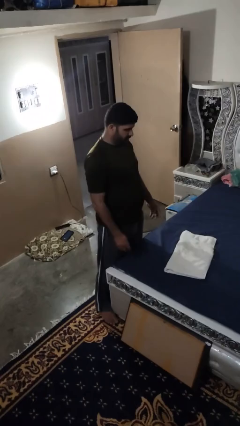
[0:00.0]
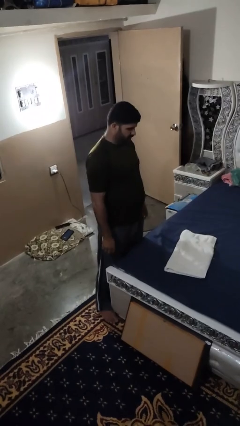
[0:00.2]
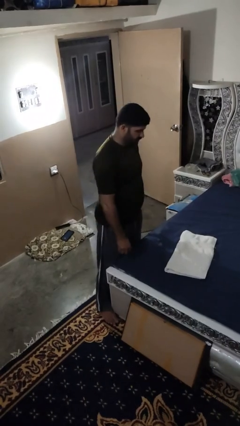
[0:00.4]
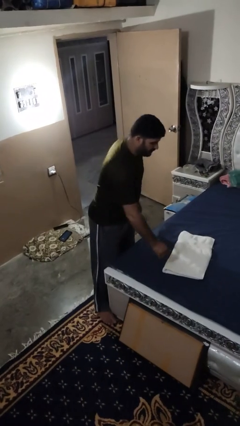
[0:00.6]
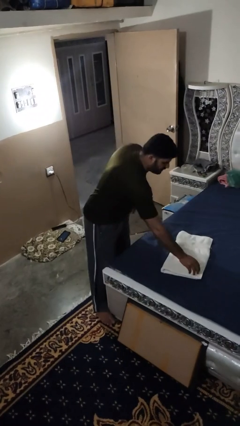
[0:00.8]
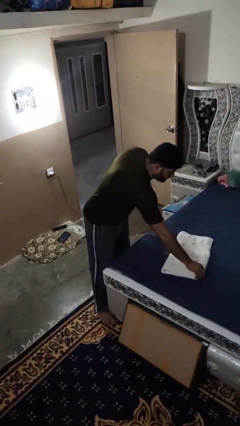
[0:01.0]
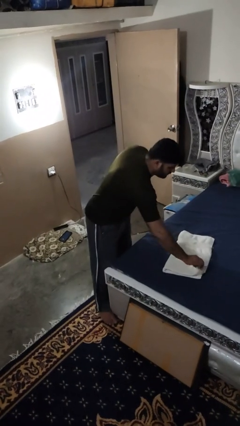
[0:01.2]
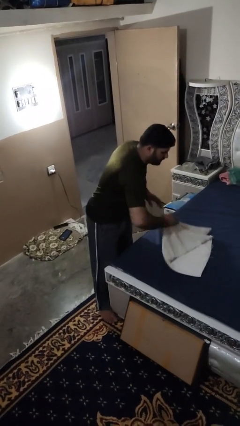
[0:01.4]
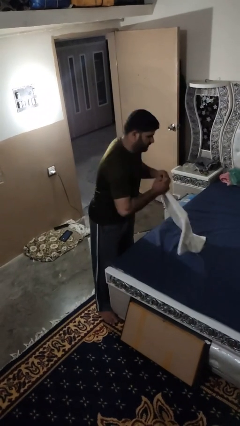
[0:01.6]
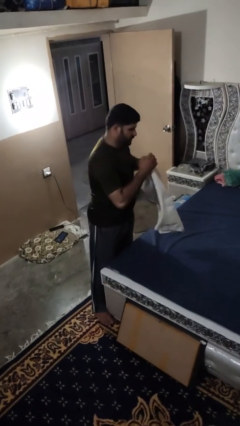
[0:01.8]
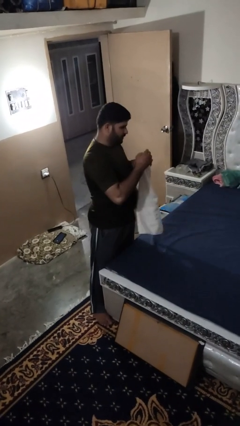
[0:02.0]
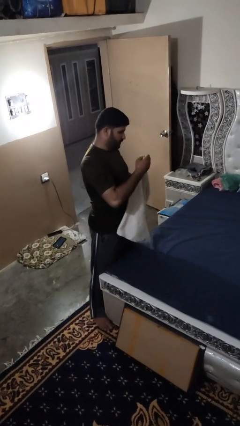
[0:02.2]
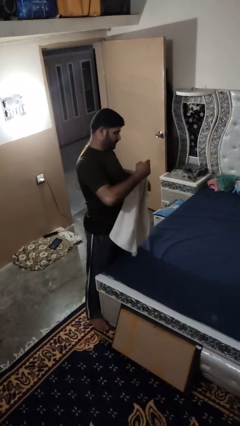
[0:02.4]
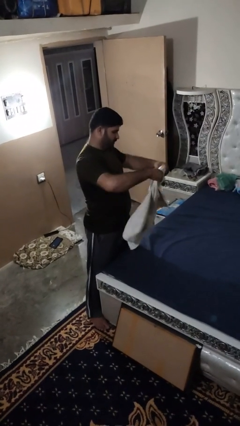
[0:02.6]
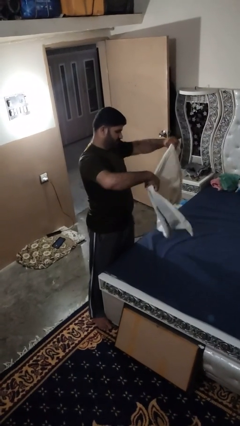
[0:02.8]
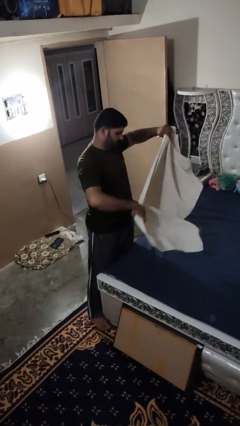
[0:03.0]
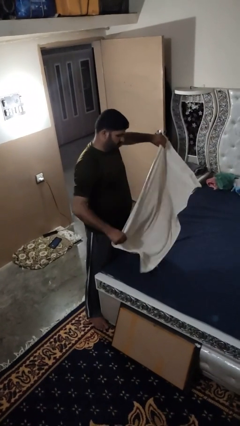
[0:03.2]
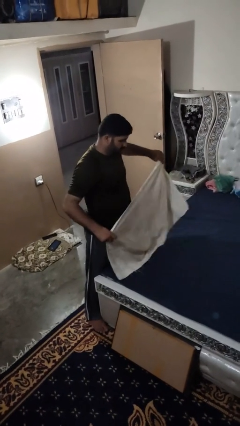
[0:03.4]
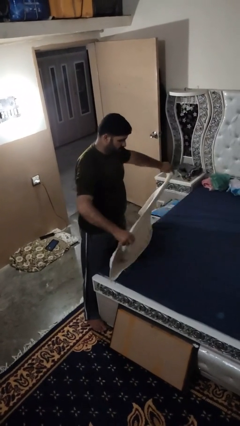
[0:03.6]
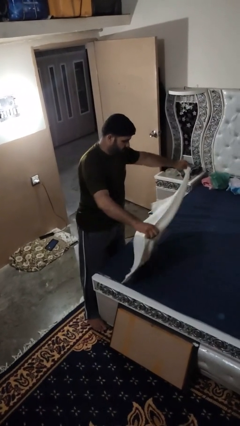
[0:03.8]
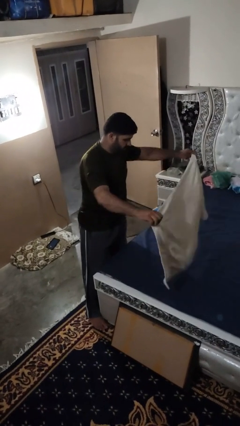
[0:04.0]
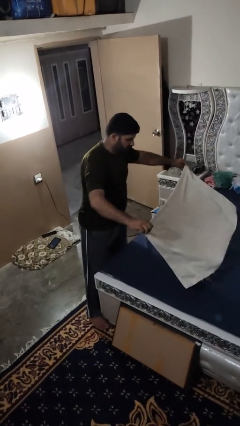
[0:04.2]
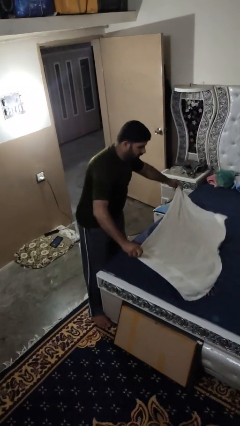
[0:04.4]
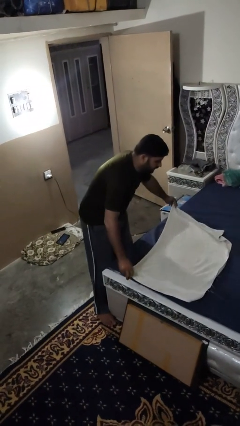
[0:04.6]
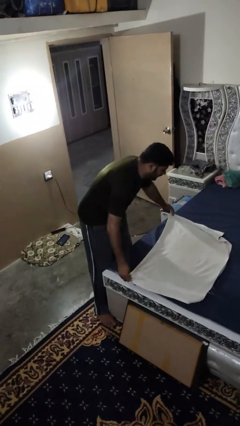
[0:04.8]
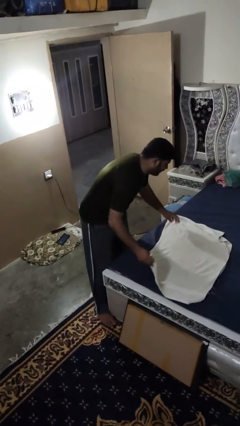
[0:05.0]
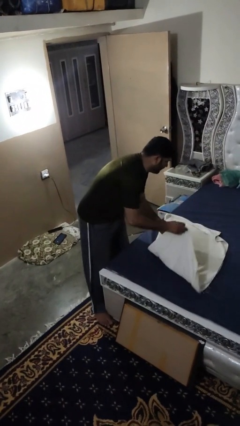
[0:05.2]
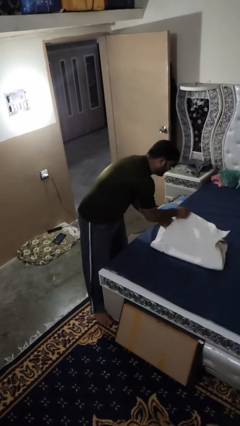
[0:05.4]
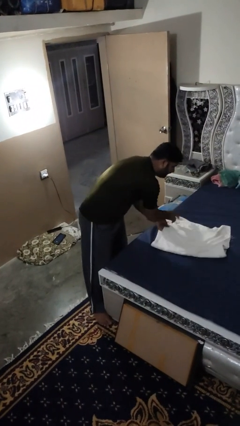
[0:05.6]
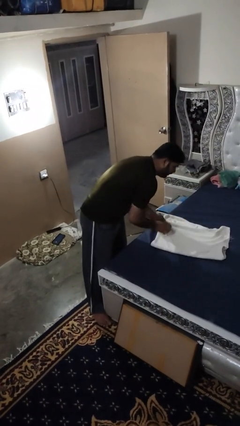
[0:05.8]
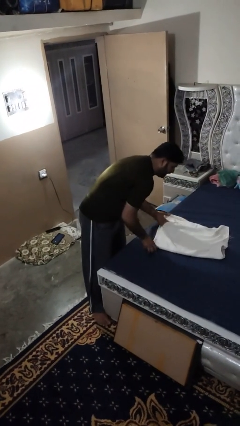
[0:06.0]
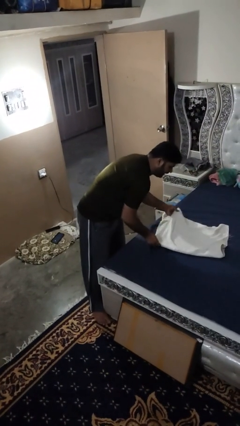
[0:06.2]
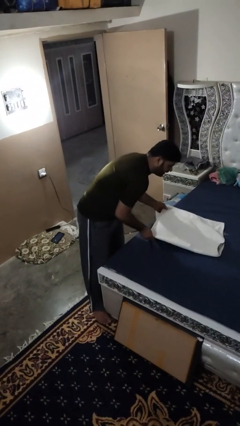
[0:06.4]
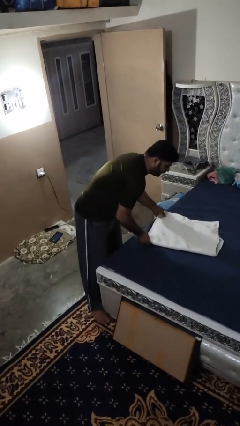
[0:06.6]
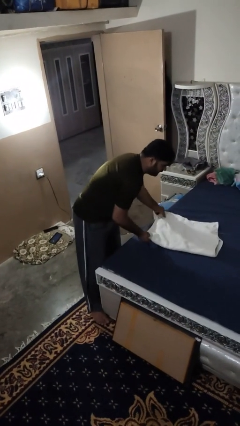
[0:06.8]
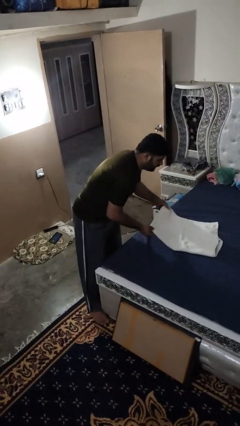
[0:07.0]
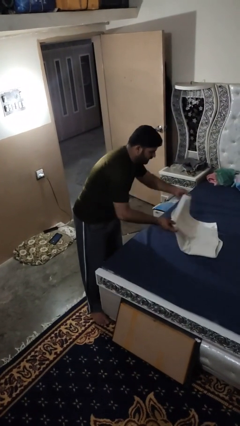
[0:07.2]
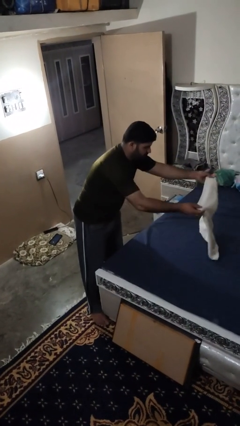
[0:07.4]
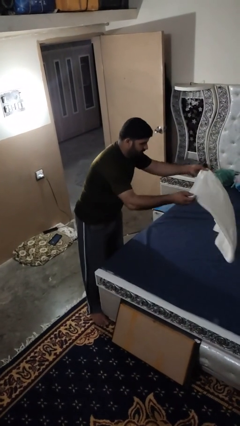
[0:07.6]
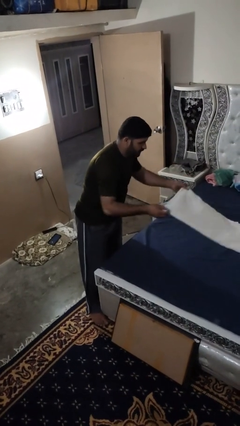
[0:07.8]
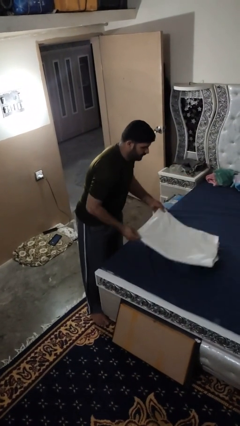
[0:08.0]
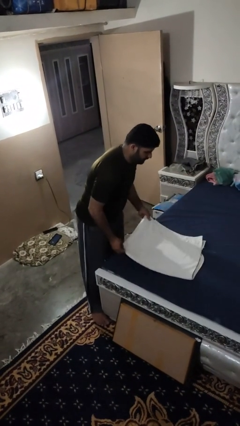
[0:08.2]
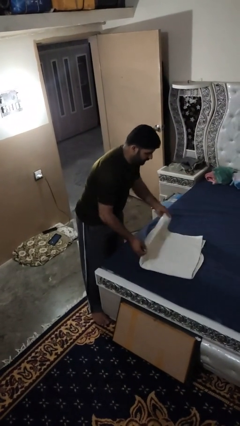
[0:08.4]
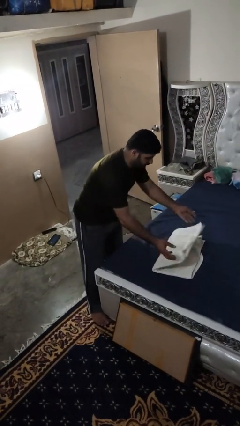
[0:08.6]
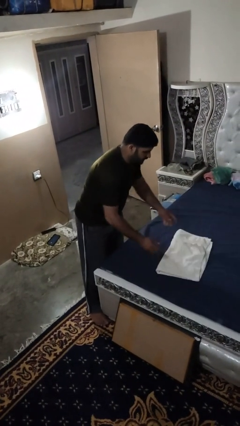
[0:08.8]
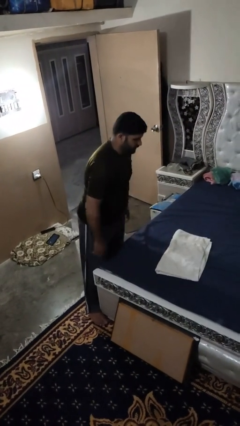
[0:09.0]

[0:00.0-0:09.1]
person folds towel

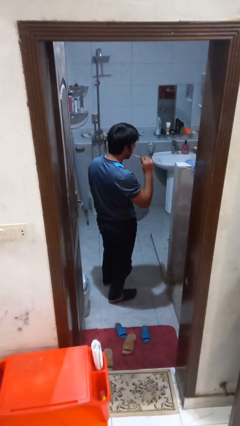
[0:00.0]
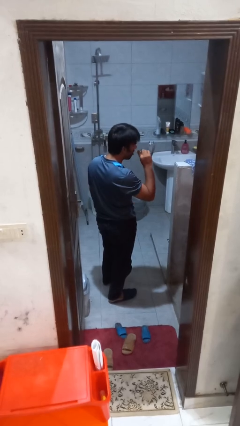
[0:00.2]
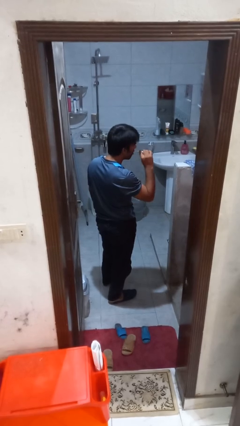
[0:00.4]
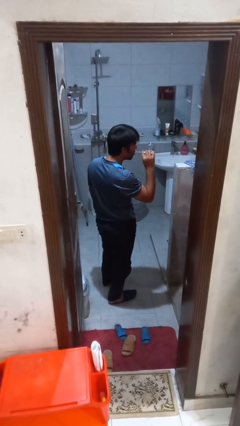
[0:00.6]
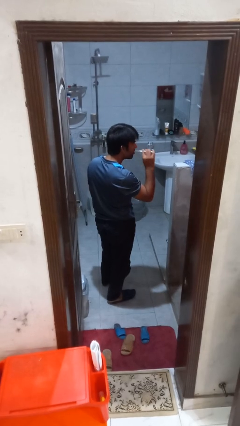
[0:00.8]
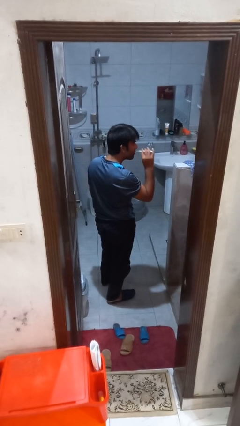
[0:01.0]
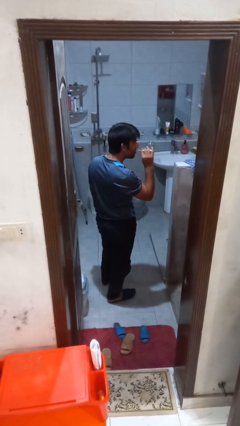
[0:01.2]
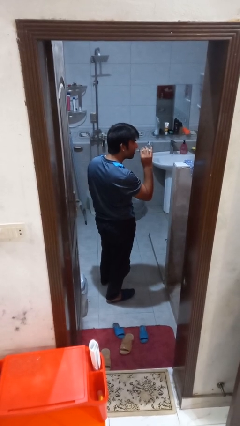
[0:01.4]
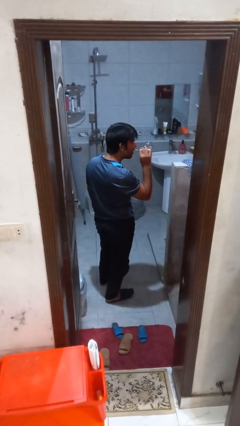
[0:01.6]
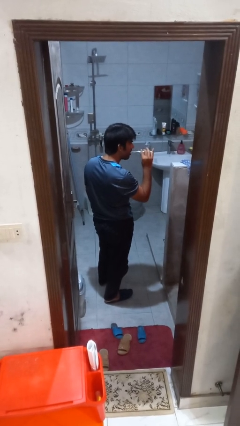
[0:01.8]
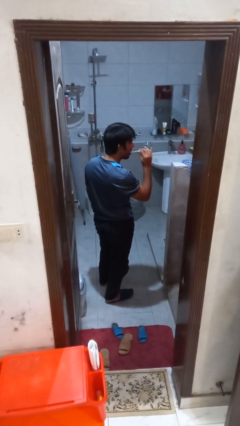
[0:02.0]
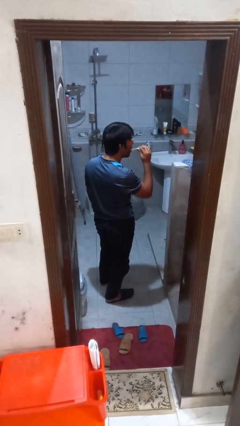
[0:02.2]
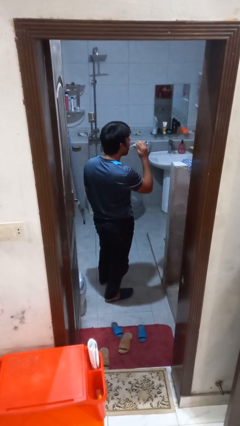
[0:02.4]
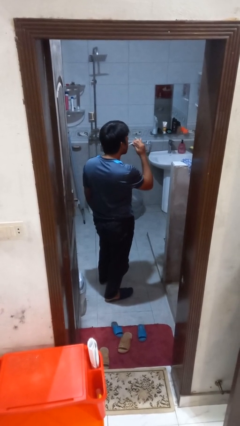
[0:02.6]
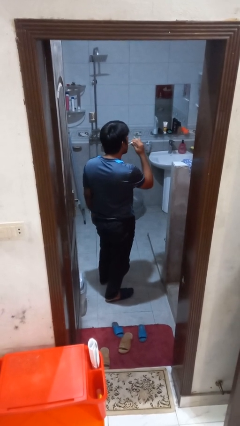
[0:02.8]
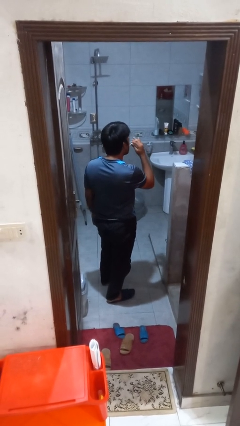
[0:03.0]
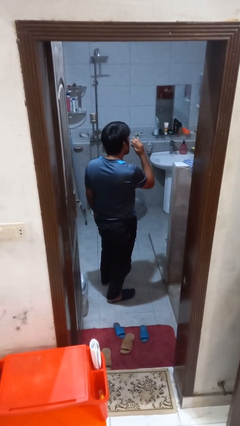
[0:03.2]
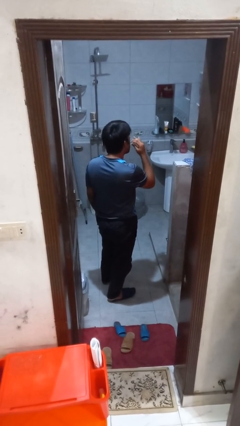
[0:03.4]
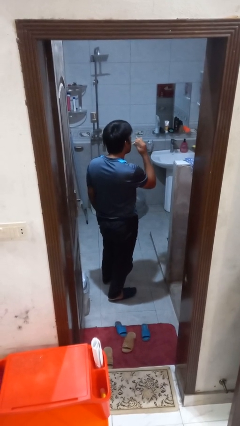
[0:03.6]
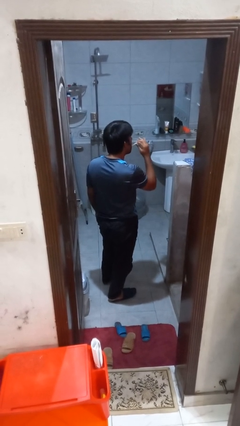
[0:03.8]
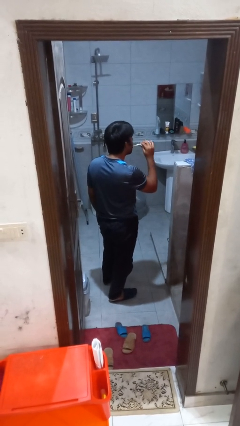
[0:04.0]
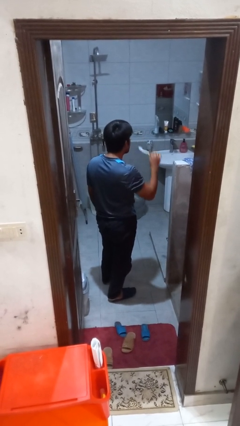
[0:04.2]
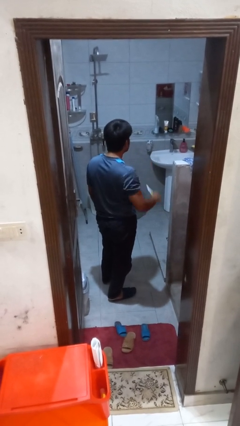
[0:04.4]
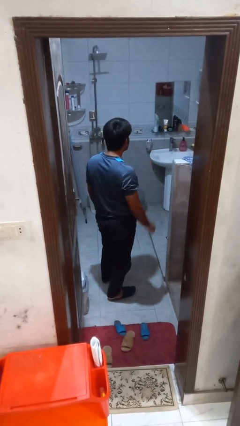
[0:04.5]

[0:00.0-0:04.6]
person brushes teeth

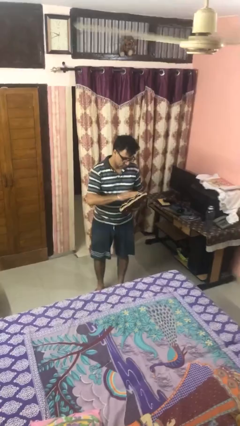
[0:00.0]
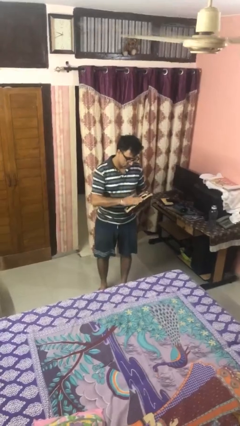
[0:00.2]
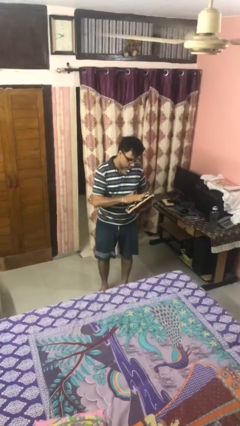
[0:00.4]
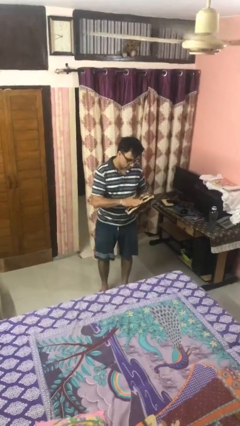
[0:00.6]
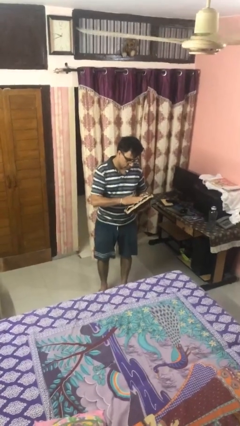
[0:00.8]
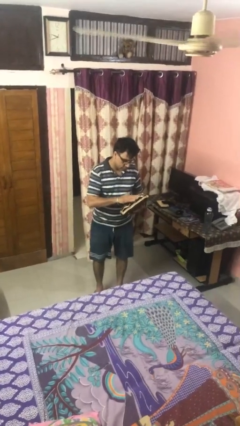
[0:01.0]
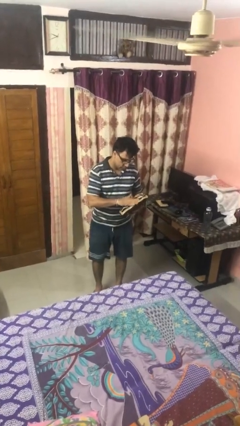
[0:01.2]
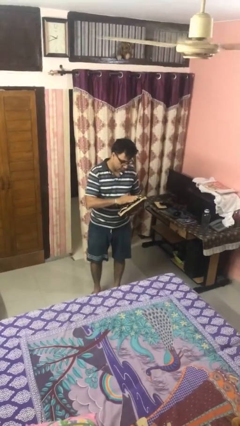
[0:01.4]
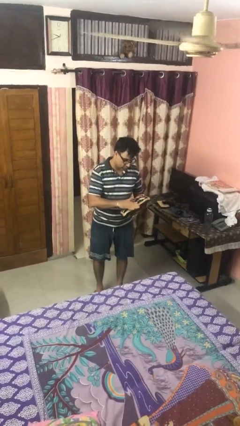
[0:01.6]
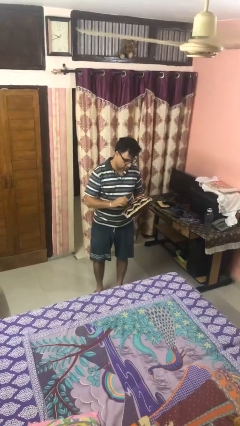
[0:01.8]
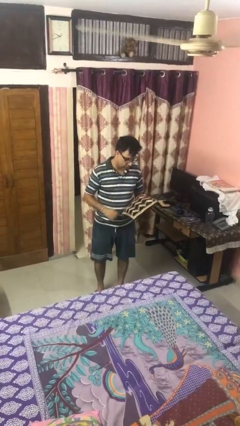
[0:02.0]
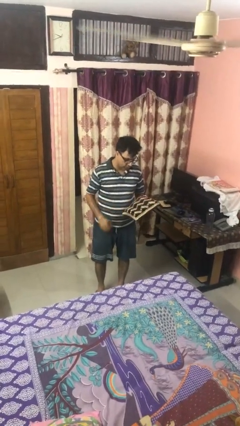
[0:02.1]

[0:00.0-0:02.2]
person waves hand over object

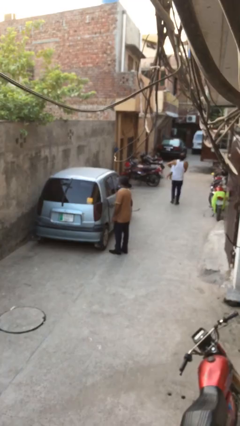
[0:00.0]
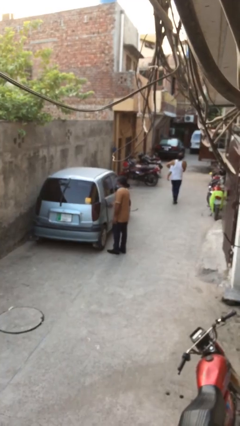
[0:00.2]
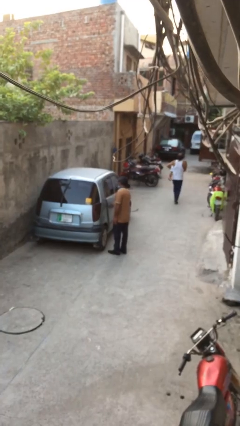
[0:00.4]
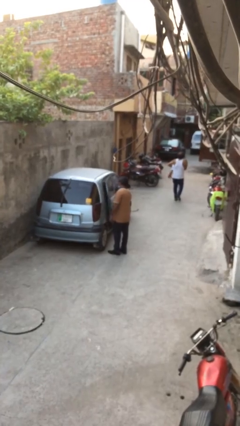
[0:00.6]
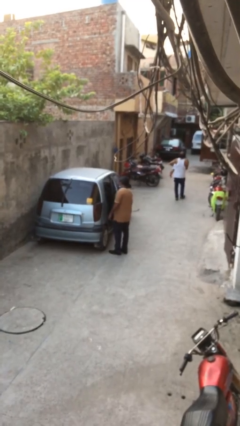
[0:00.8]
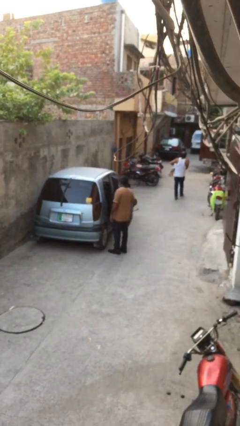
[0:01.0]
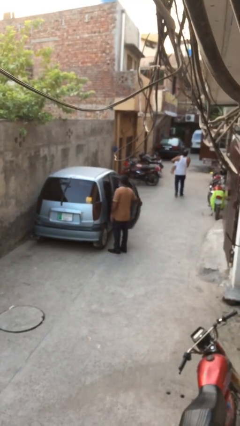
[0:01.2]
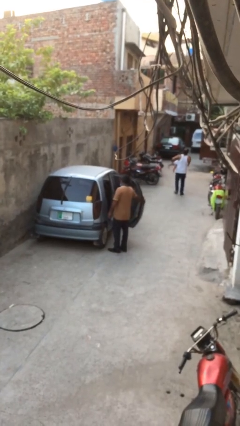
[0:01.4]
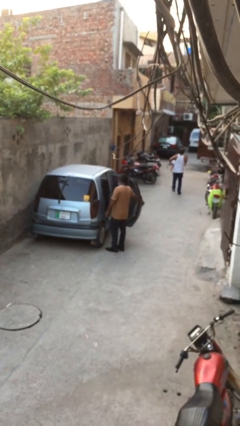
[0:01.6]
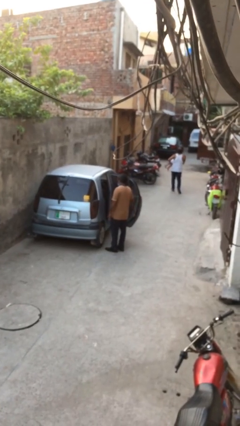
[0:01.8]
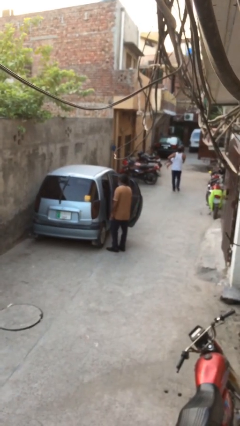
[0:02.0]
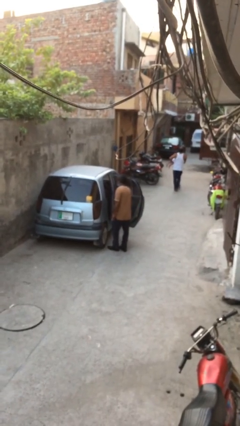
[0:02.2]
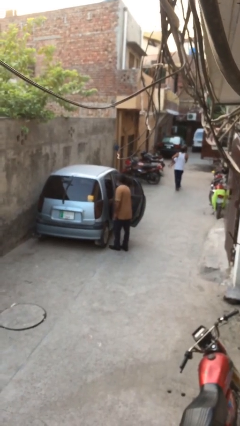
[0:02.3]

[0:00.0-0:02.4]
person opens car door
